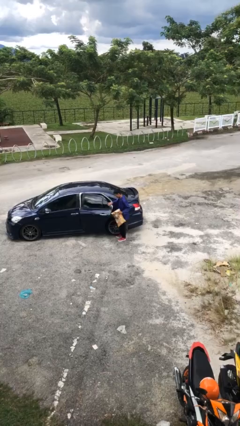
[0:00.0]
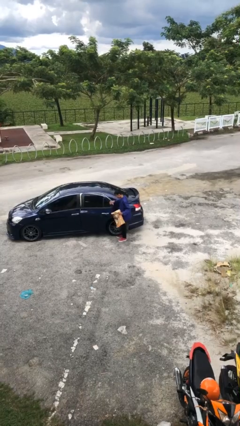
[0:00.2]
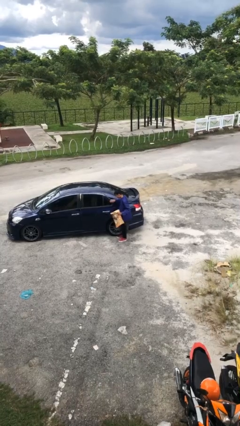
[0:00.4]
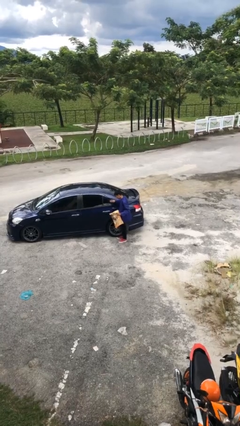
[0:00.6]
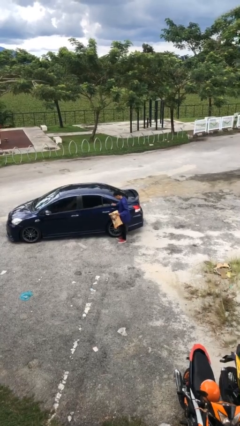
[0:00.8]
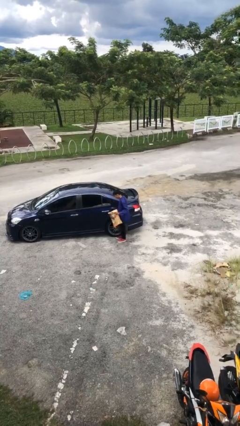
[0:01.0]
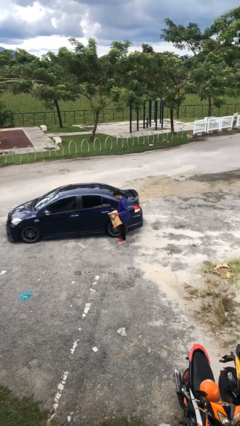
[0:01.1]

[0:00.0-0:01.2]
person closes car door

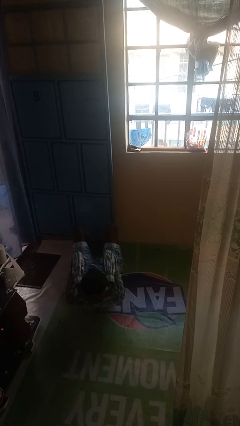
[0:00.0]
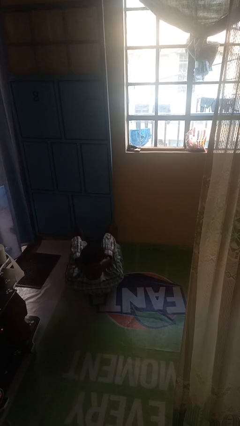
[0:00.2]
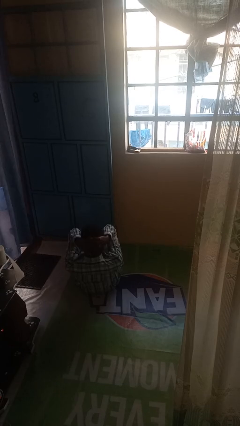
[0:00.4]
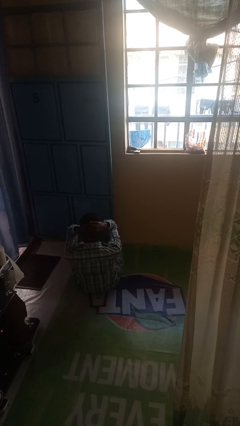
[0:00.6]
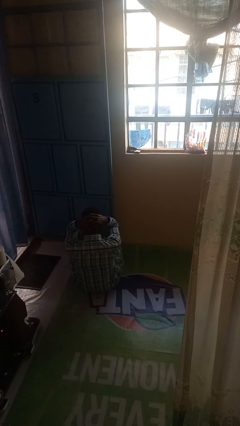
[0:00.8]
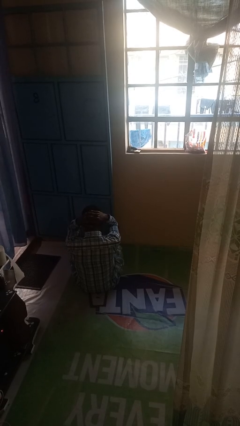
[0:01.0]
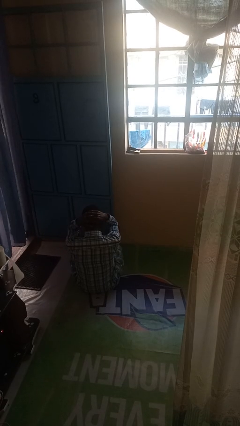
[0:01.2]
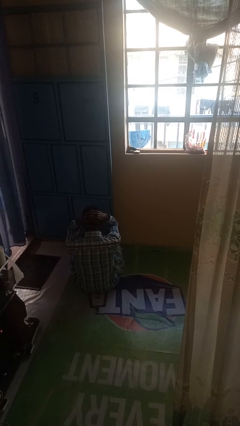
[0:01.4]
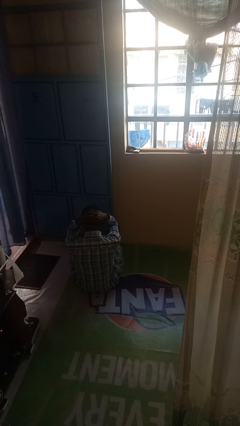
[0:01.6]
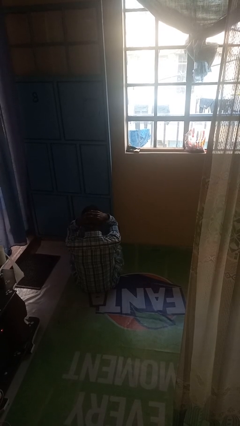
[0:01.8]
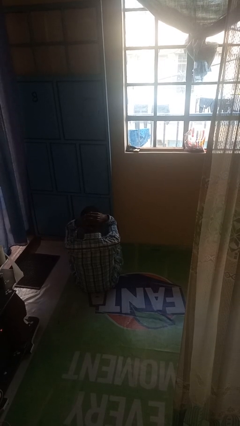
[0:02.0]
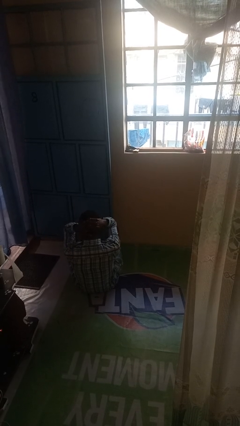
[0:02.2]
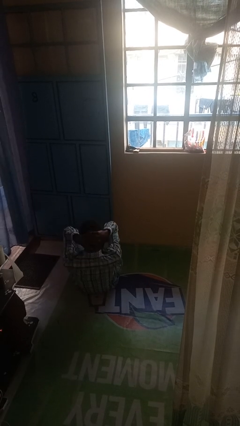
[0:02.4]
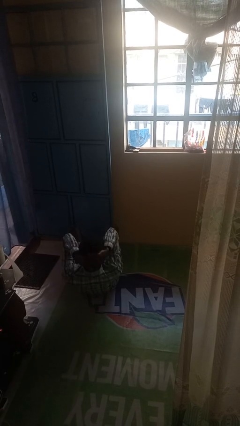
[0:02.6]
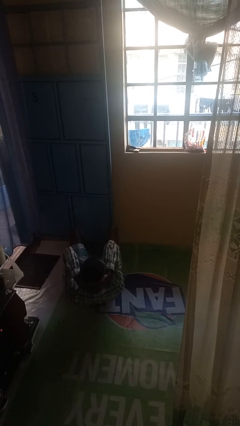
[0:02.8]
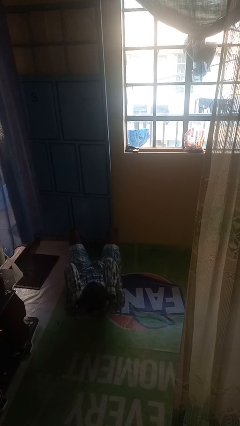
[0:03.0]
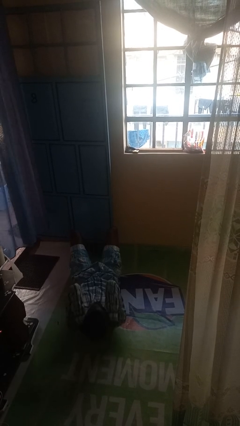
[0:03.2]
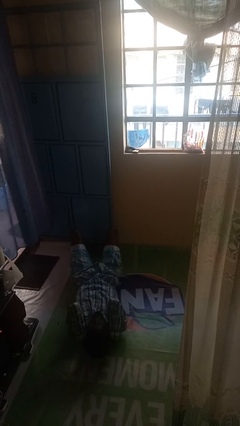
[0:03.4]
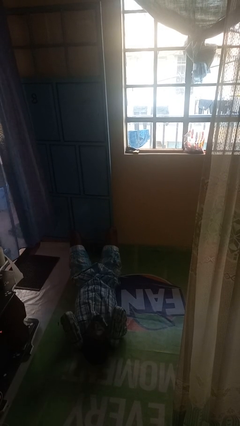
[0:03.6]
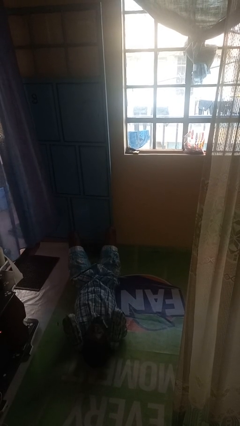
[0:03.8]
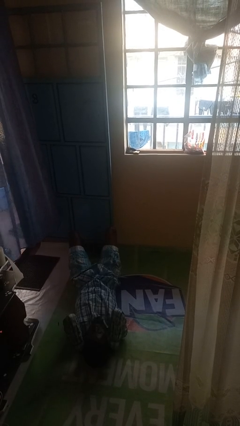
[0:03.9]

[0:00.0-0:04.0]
person exercises with situp

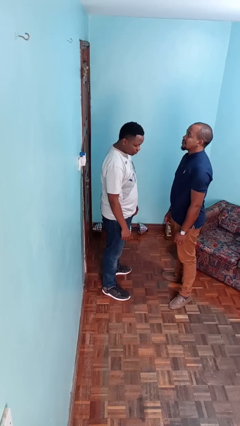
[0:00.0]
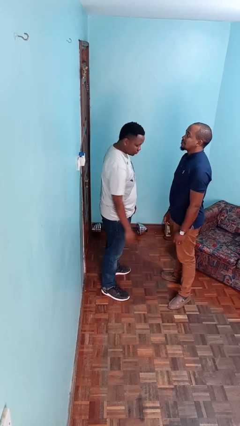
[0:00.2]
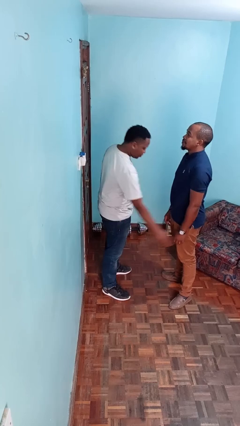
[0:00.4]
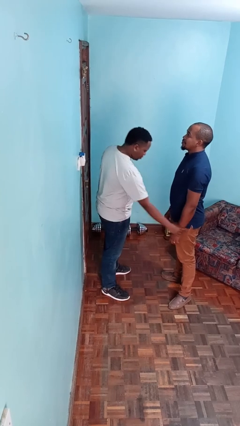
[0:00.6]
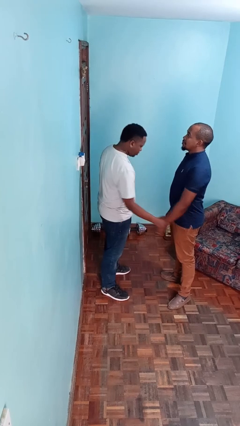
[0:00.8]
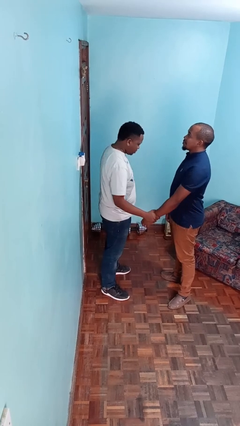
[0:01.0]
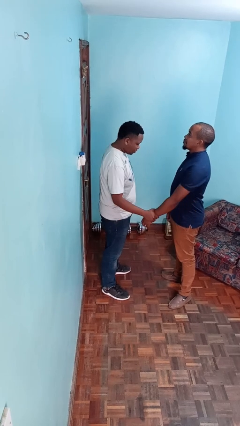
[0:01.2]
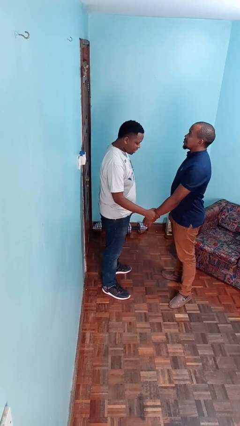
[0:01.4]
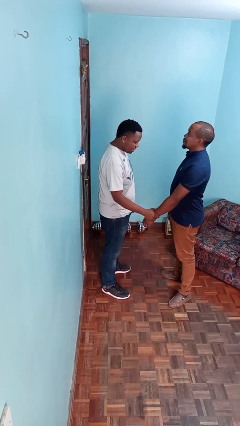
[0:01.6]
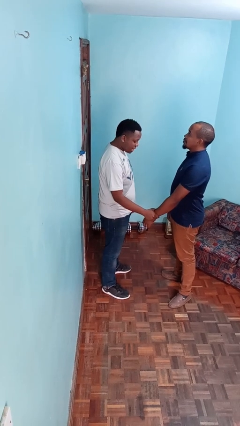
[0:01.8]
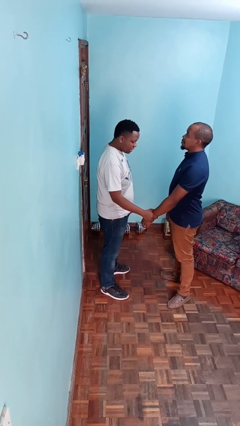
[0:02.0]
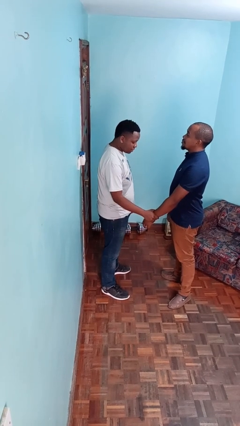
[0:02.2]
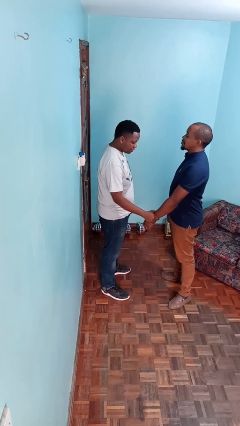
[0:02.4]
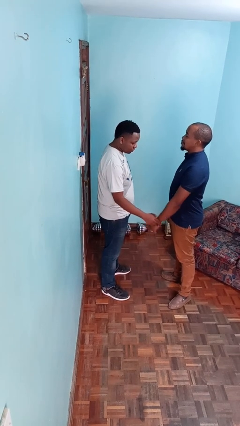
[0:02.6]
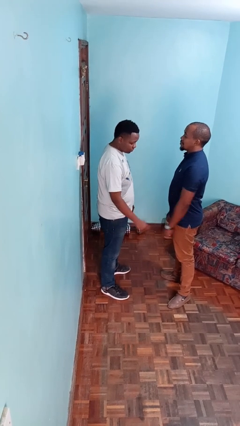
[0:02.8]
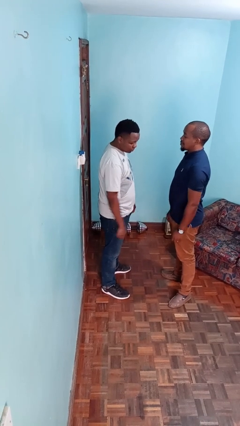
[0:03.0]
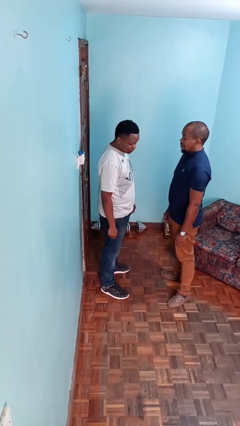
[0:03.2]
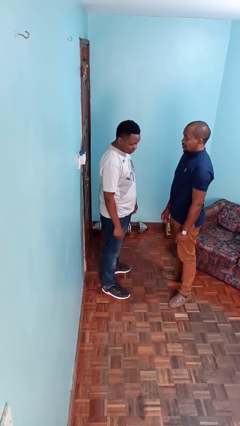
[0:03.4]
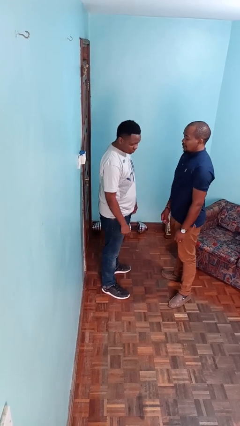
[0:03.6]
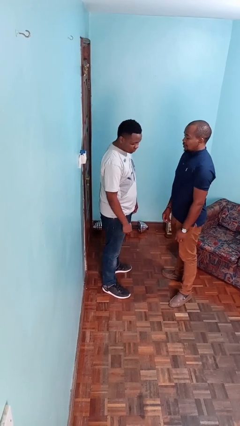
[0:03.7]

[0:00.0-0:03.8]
person grabs person by forearm

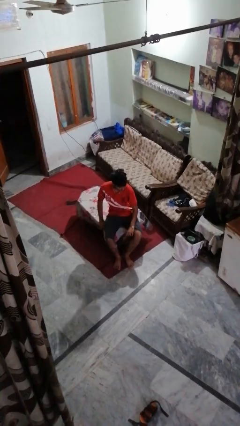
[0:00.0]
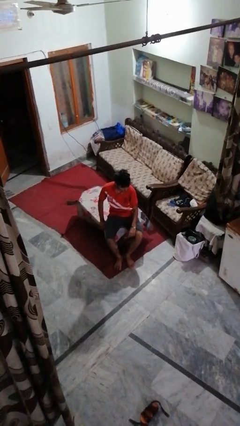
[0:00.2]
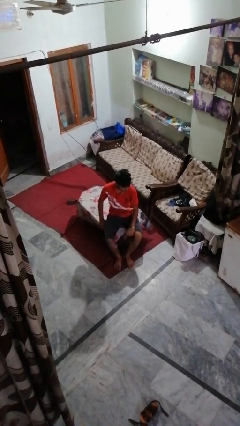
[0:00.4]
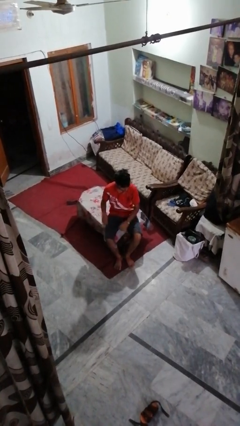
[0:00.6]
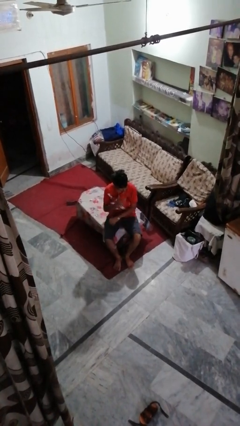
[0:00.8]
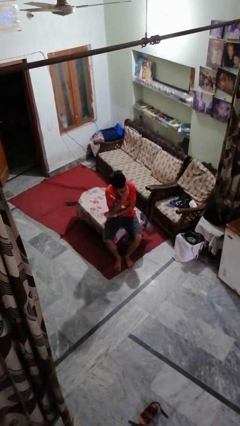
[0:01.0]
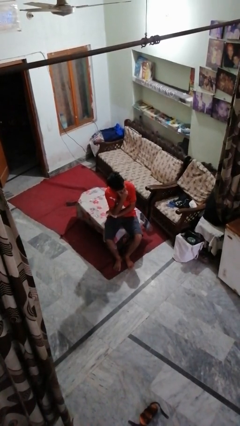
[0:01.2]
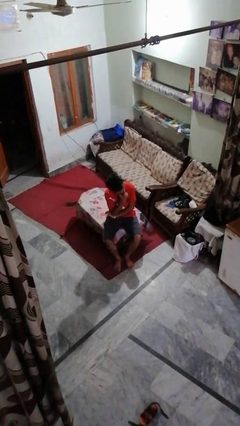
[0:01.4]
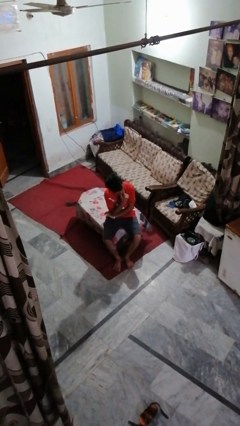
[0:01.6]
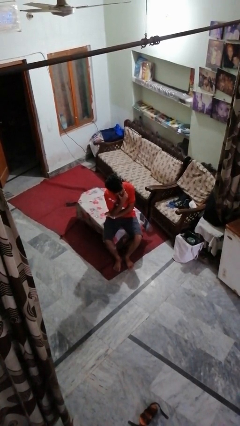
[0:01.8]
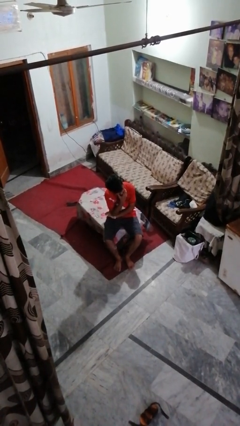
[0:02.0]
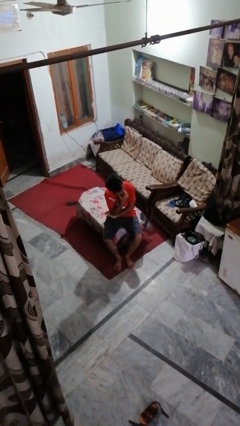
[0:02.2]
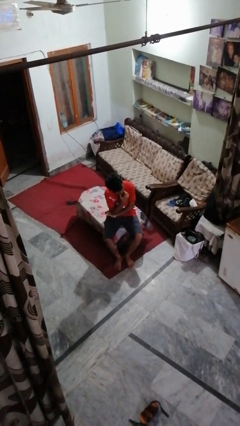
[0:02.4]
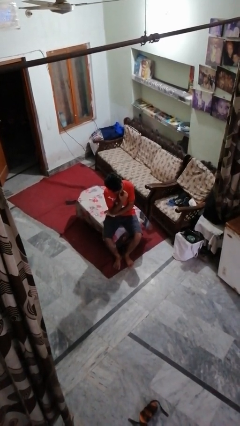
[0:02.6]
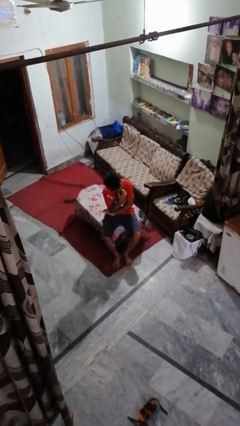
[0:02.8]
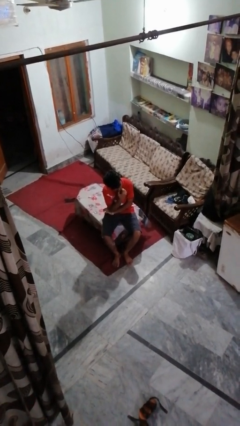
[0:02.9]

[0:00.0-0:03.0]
person strokes chin

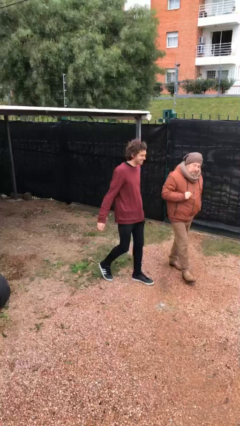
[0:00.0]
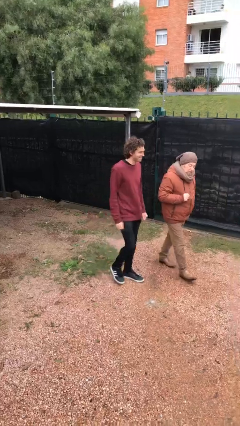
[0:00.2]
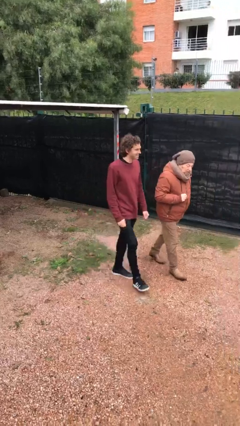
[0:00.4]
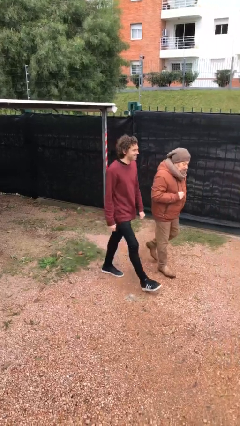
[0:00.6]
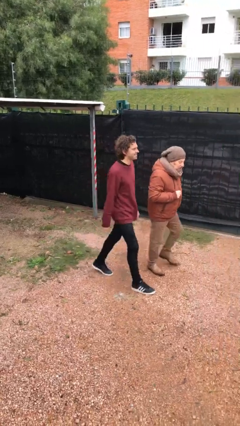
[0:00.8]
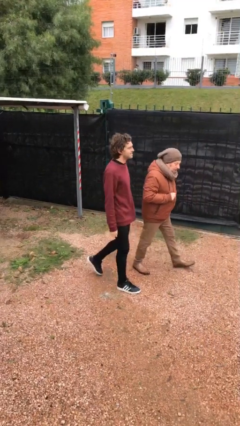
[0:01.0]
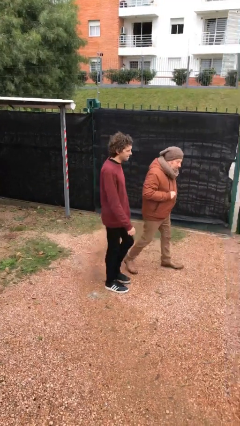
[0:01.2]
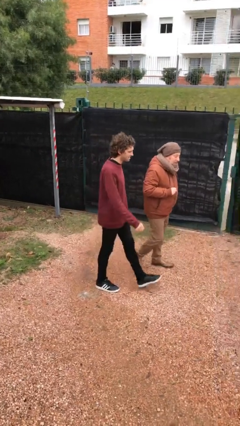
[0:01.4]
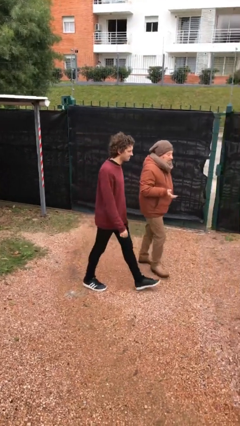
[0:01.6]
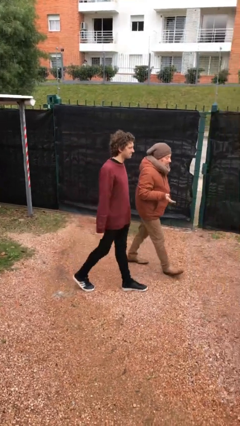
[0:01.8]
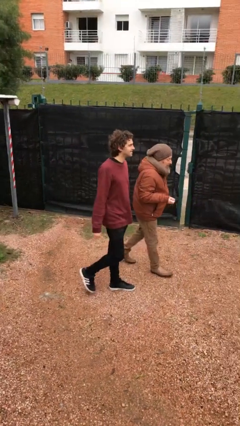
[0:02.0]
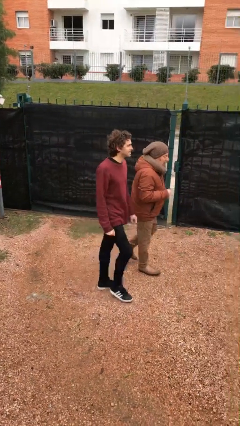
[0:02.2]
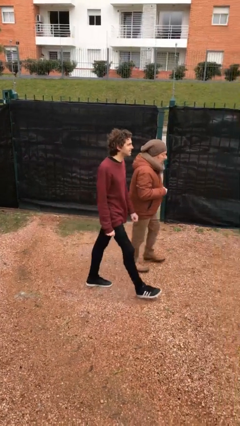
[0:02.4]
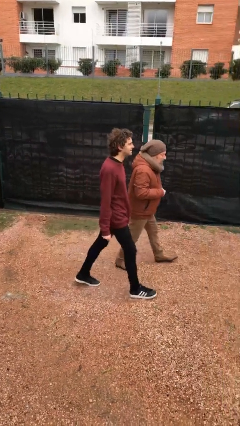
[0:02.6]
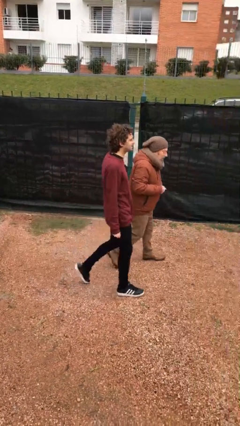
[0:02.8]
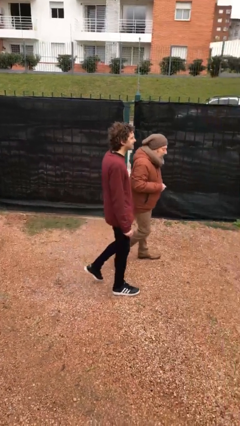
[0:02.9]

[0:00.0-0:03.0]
person talks to person

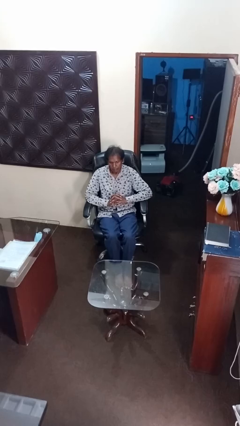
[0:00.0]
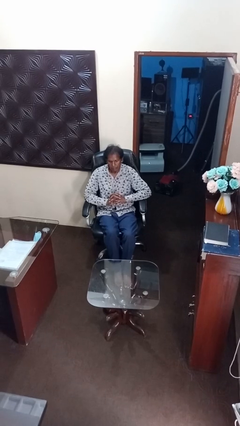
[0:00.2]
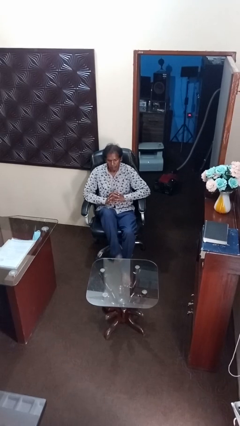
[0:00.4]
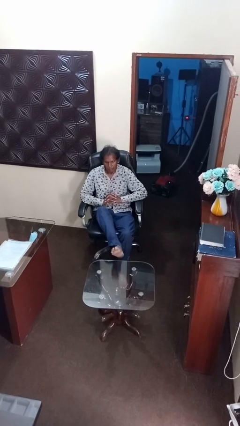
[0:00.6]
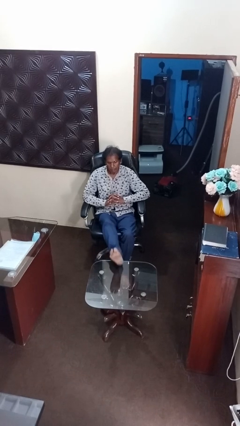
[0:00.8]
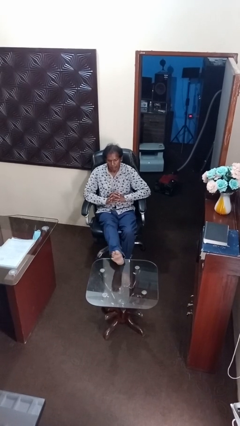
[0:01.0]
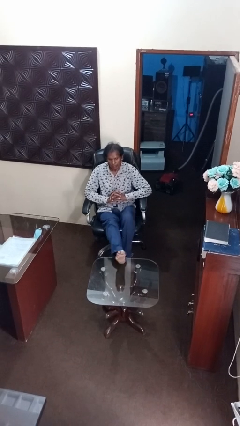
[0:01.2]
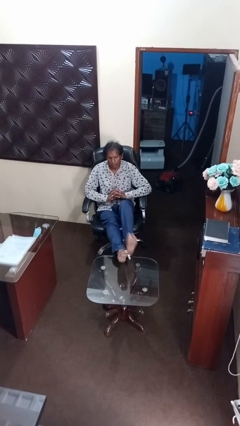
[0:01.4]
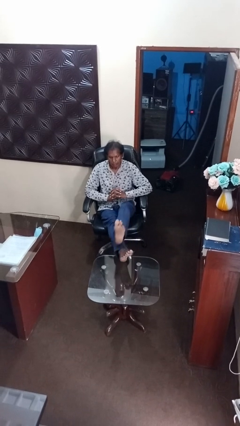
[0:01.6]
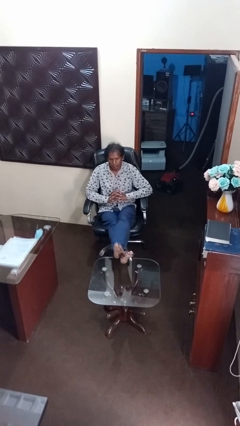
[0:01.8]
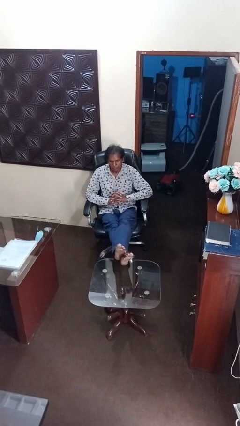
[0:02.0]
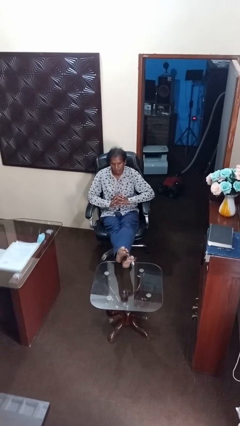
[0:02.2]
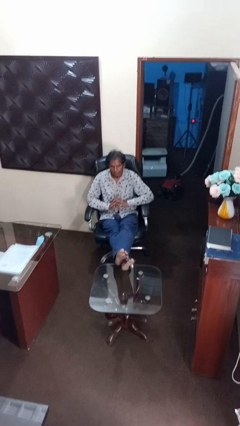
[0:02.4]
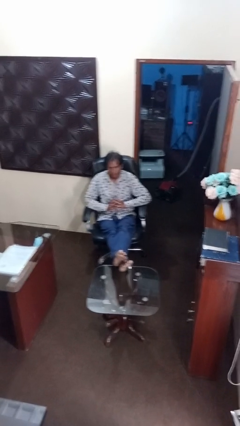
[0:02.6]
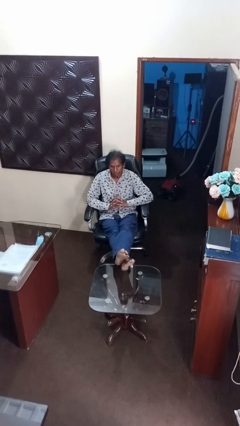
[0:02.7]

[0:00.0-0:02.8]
person puts feet up
